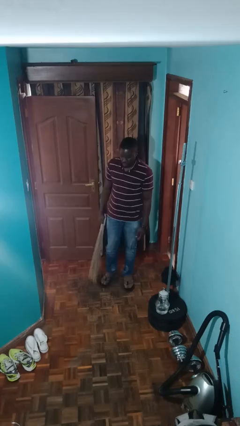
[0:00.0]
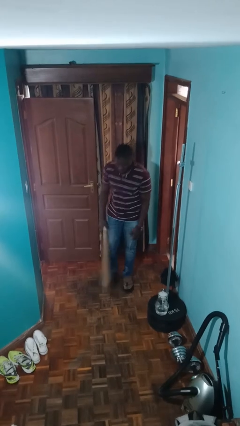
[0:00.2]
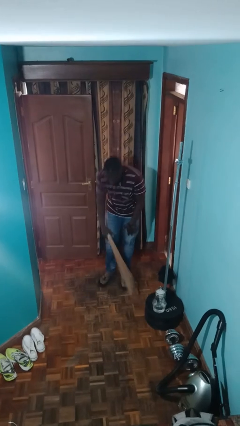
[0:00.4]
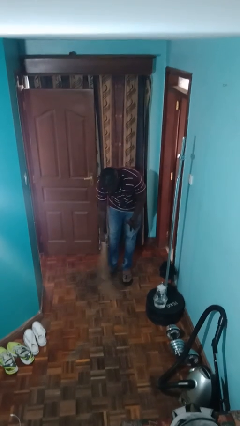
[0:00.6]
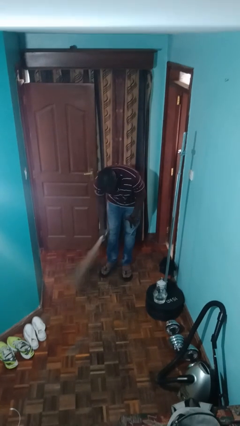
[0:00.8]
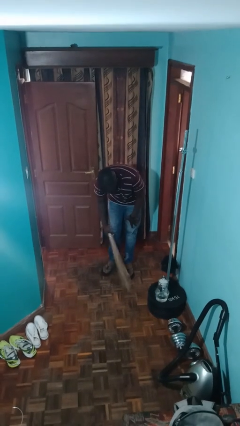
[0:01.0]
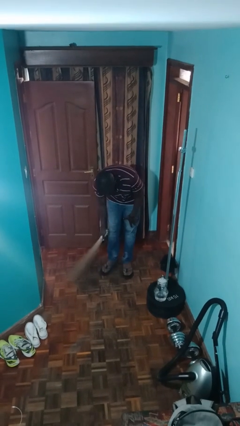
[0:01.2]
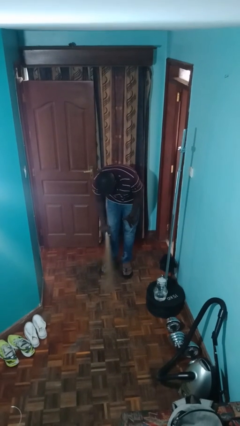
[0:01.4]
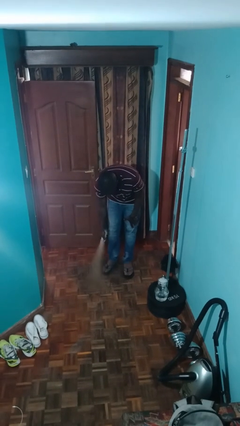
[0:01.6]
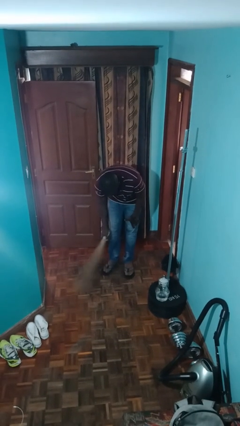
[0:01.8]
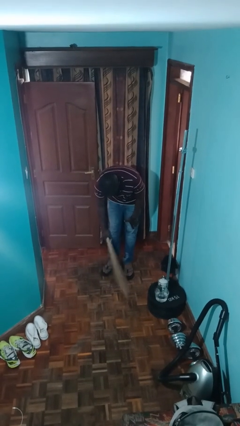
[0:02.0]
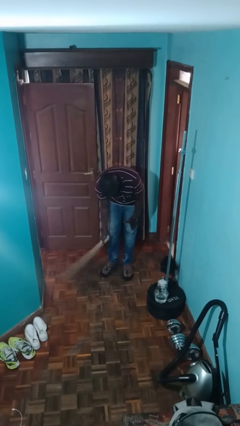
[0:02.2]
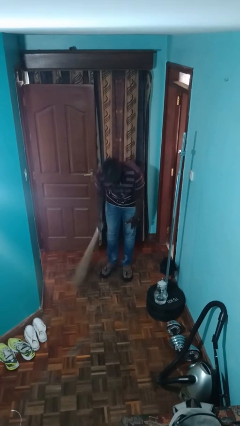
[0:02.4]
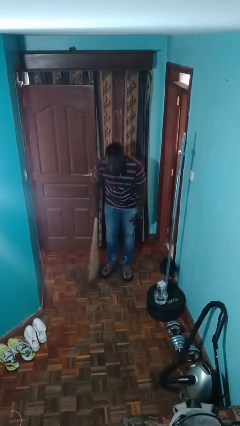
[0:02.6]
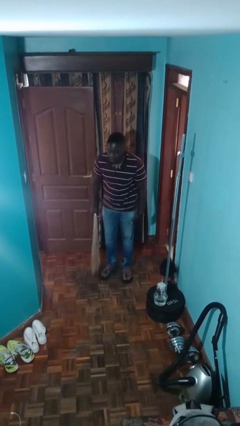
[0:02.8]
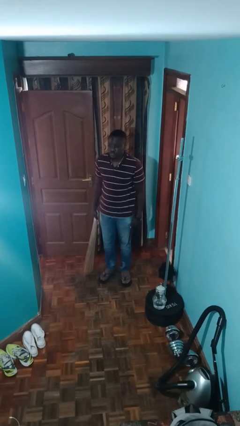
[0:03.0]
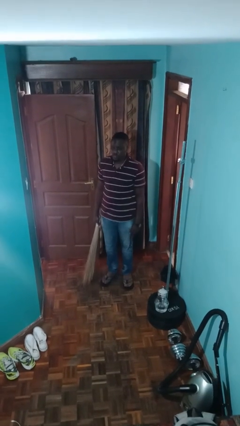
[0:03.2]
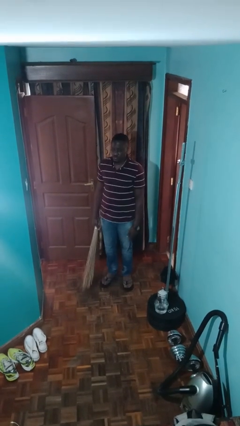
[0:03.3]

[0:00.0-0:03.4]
person sweeps floor

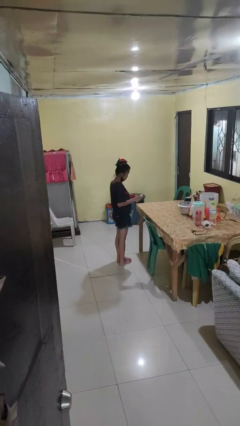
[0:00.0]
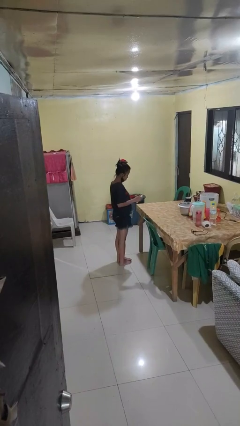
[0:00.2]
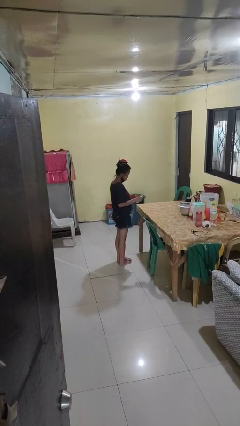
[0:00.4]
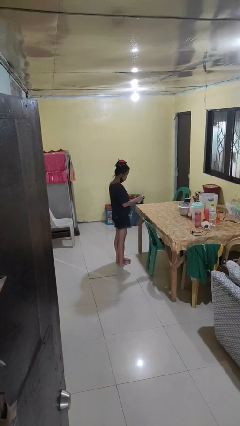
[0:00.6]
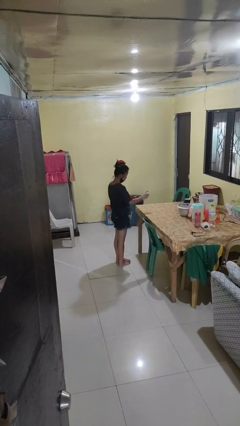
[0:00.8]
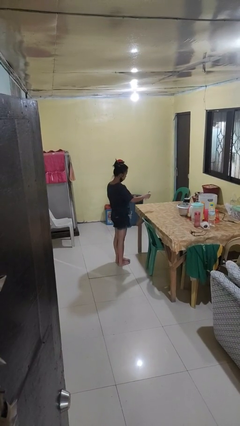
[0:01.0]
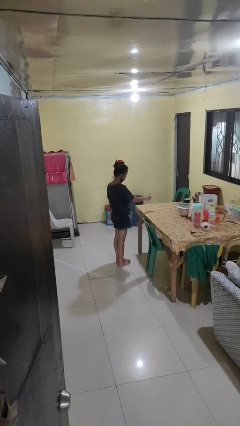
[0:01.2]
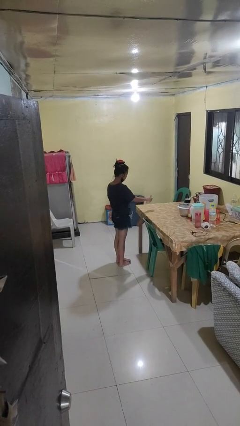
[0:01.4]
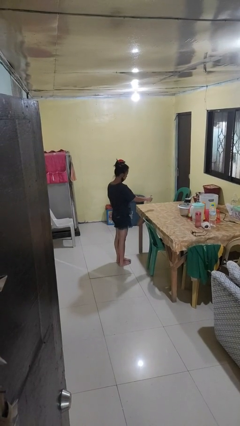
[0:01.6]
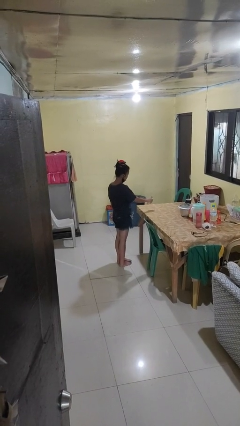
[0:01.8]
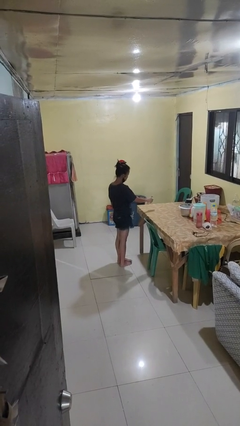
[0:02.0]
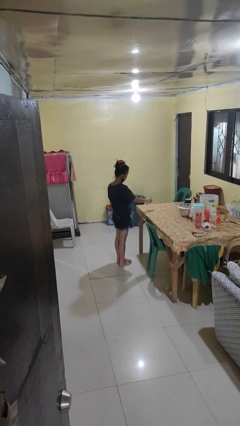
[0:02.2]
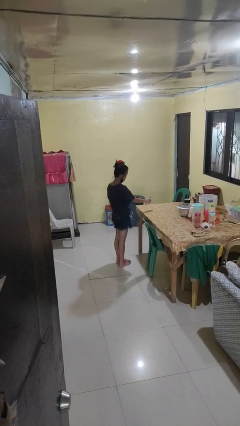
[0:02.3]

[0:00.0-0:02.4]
person sprays from bottle

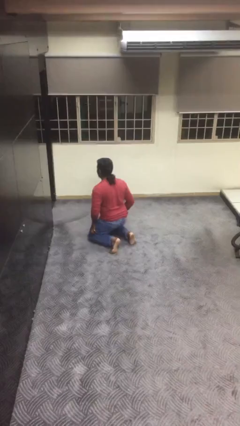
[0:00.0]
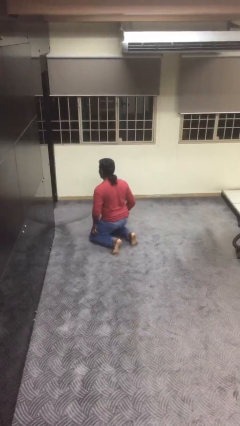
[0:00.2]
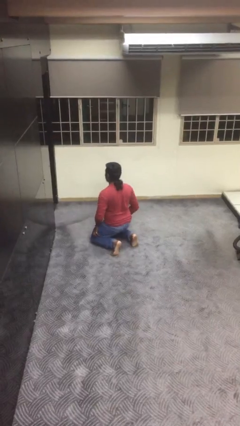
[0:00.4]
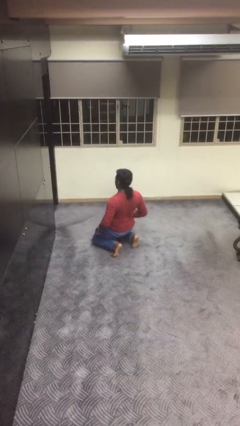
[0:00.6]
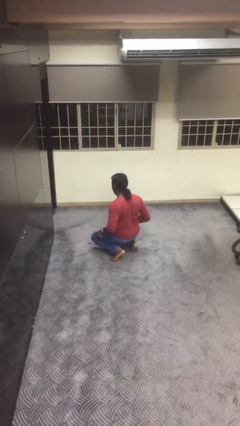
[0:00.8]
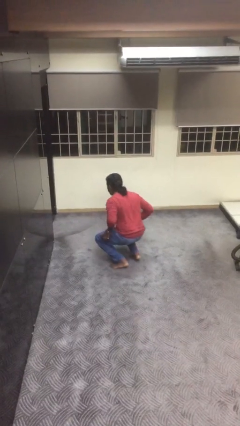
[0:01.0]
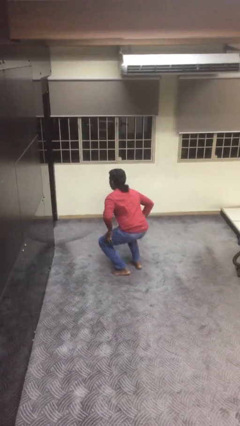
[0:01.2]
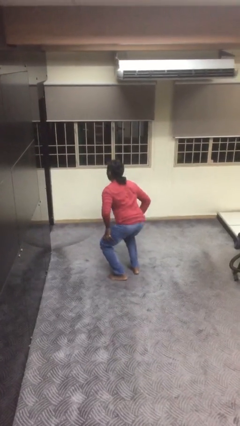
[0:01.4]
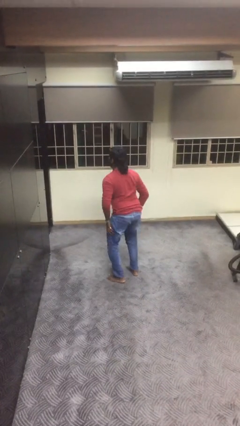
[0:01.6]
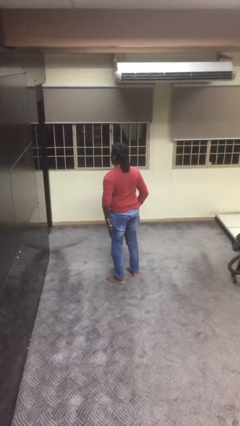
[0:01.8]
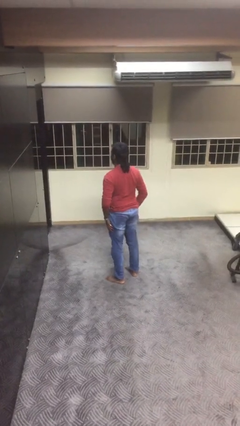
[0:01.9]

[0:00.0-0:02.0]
person stands up from floor

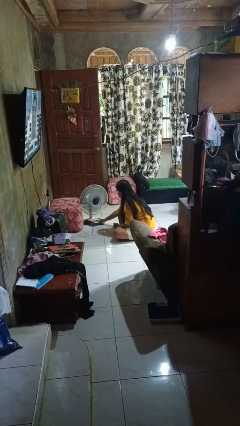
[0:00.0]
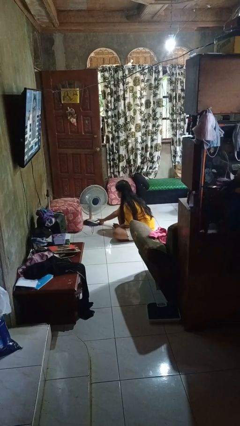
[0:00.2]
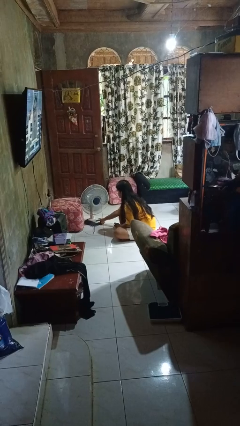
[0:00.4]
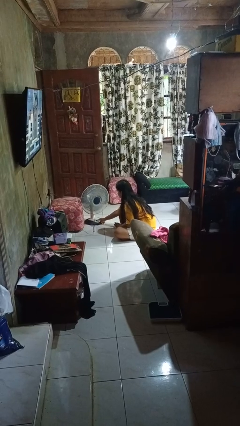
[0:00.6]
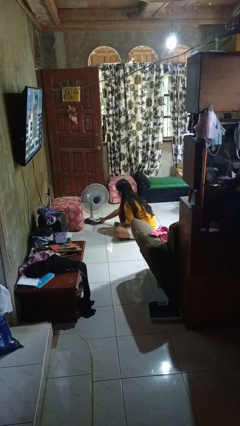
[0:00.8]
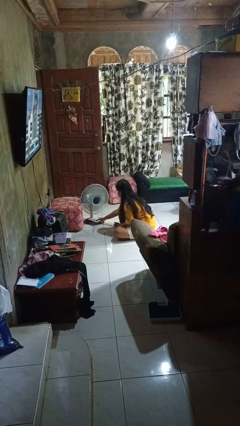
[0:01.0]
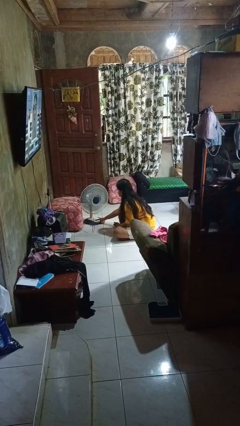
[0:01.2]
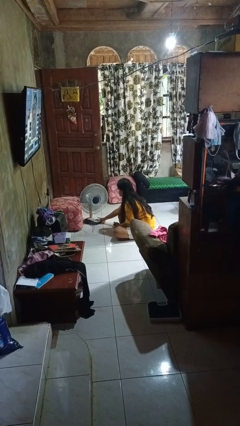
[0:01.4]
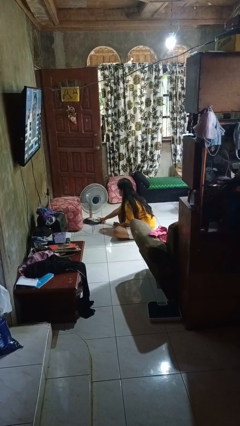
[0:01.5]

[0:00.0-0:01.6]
person turns off fan

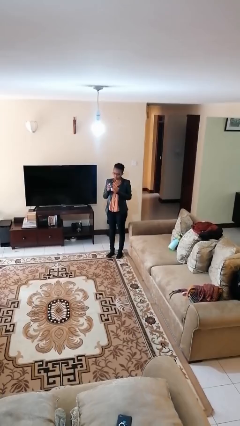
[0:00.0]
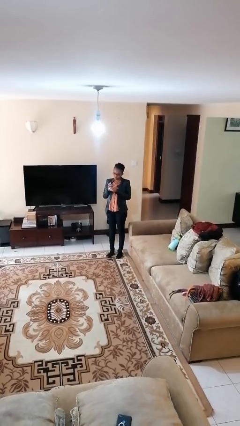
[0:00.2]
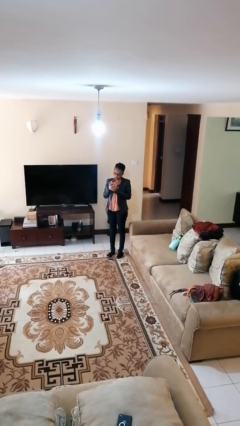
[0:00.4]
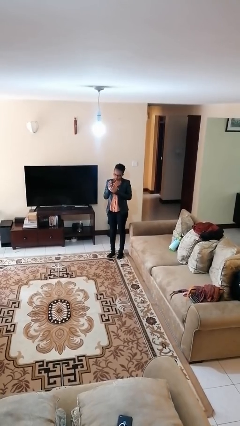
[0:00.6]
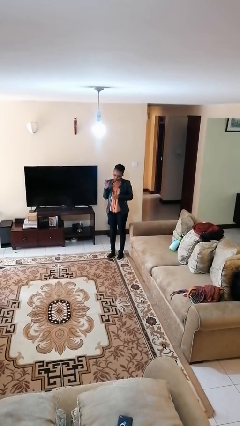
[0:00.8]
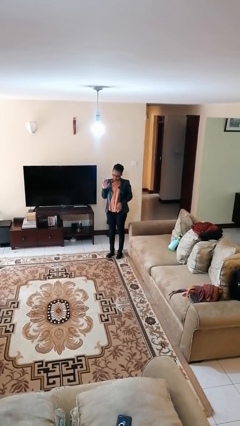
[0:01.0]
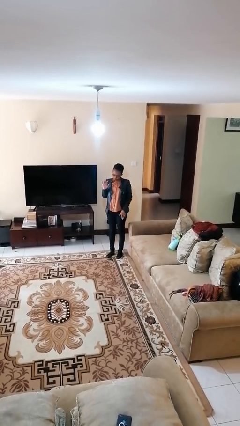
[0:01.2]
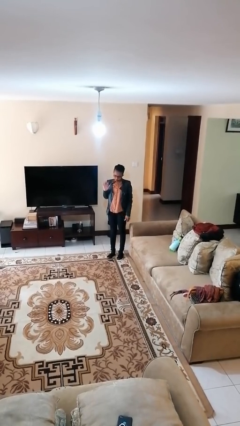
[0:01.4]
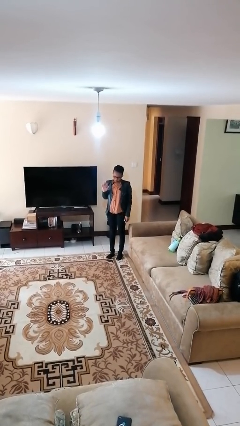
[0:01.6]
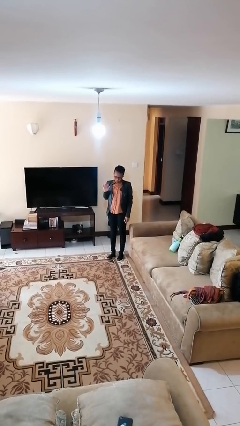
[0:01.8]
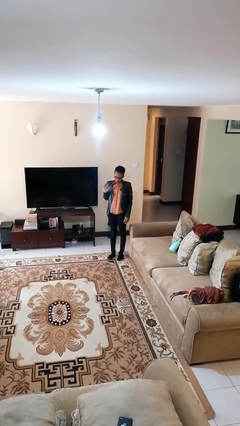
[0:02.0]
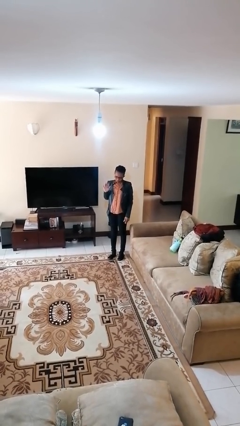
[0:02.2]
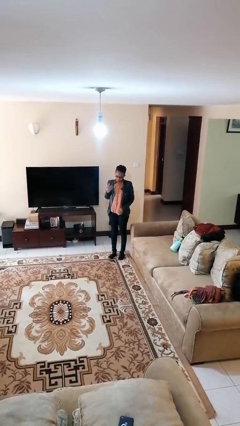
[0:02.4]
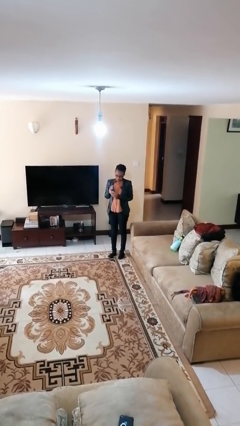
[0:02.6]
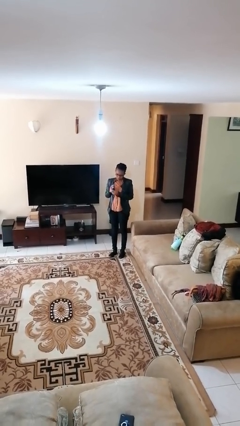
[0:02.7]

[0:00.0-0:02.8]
person puts on ring

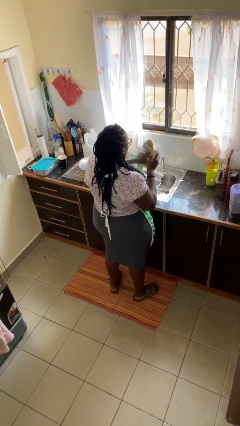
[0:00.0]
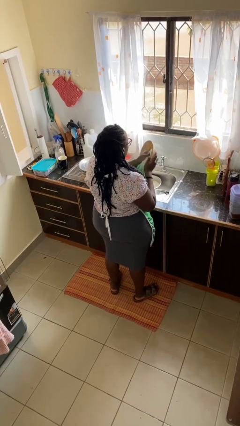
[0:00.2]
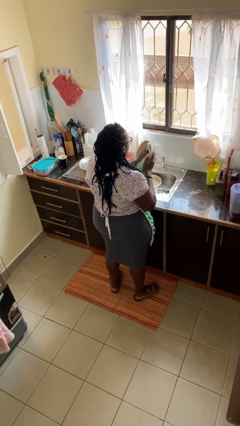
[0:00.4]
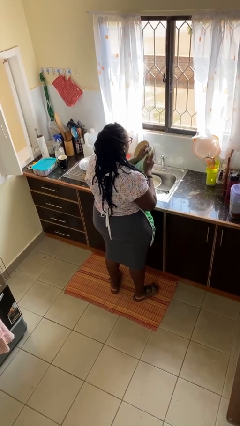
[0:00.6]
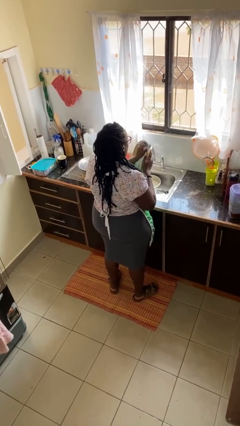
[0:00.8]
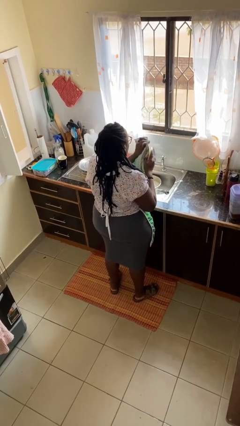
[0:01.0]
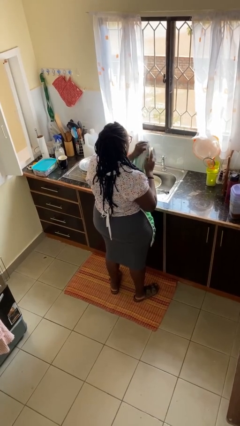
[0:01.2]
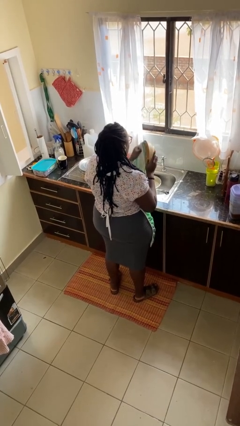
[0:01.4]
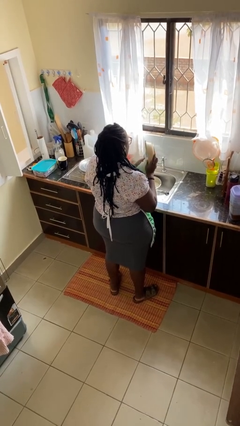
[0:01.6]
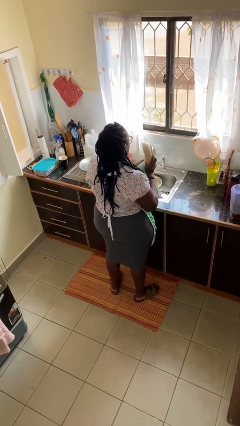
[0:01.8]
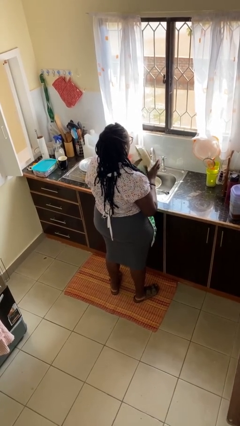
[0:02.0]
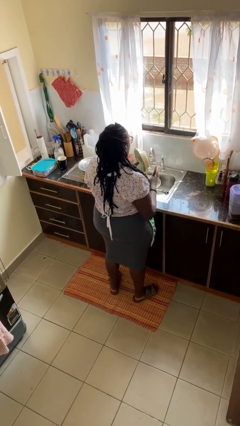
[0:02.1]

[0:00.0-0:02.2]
person dries dish

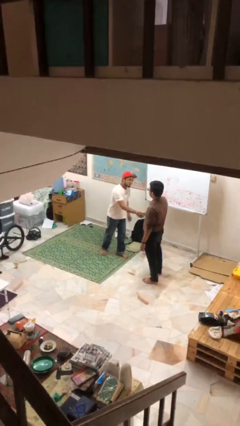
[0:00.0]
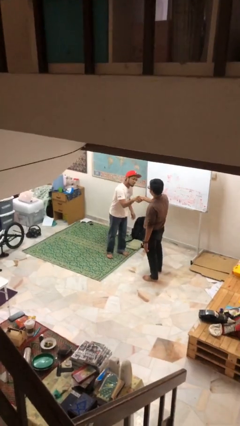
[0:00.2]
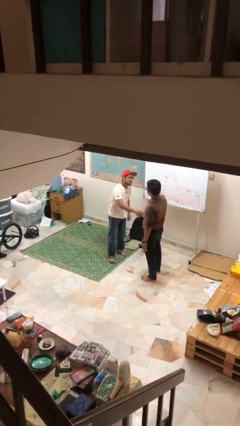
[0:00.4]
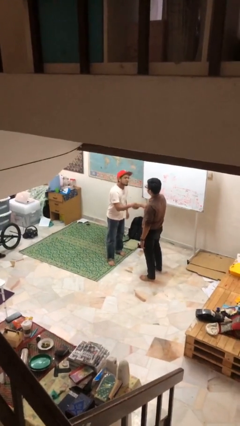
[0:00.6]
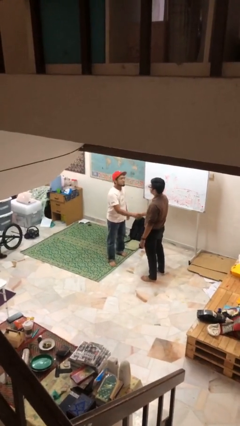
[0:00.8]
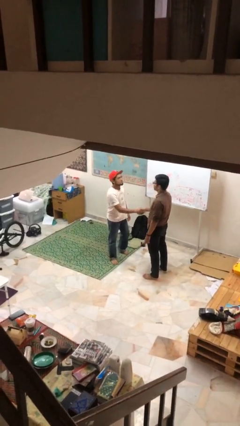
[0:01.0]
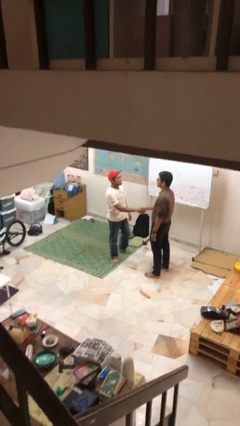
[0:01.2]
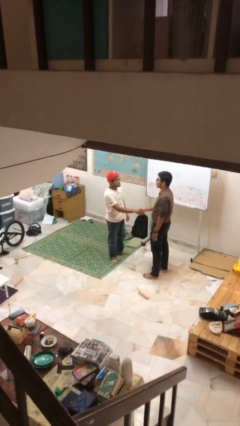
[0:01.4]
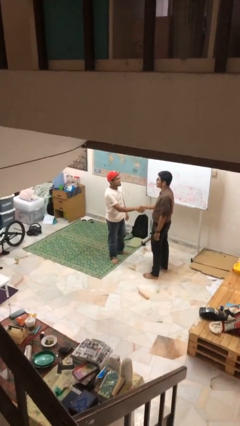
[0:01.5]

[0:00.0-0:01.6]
person shakes hand

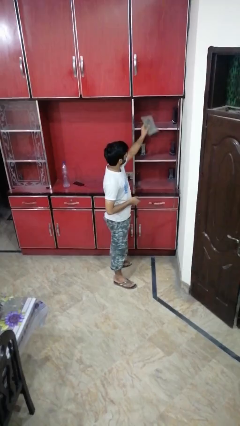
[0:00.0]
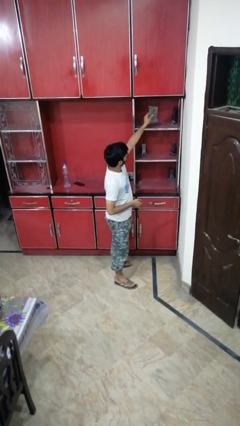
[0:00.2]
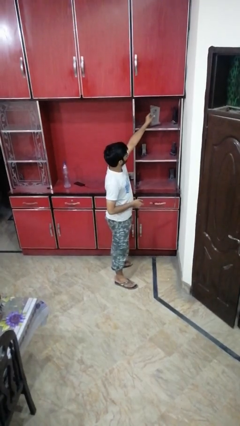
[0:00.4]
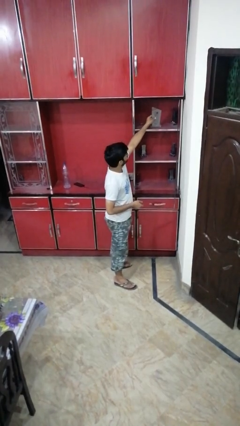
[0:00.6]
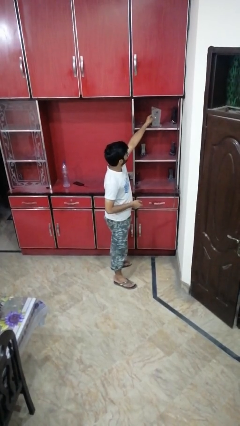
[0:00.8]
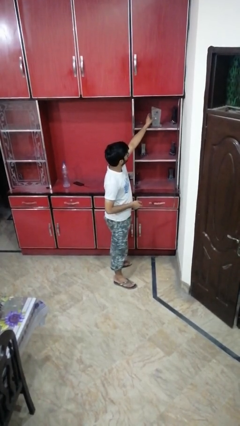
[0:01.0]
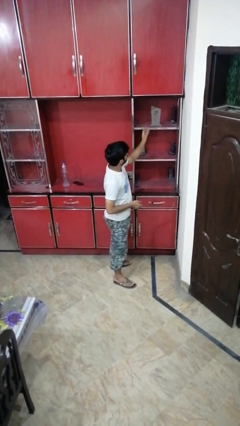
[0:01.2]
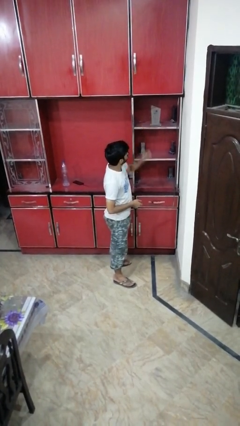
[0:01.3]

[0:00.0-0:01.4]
person puts down object into cabinet
